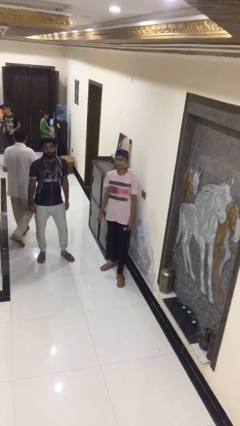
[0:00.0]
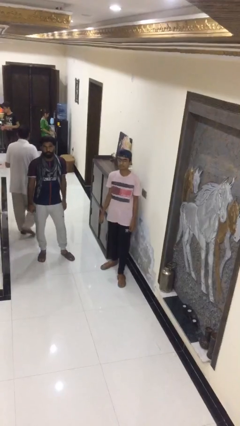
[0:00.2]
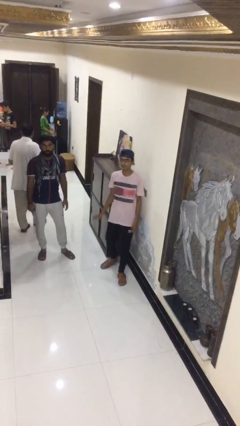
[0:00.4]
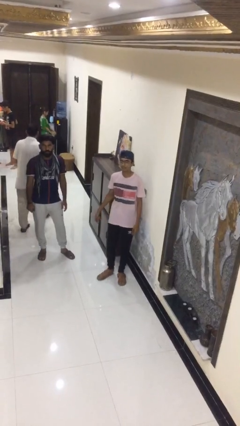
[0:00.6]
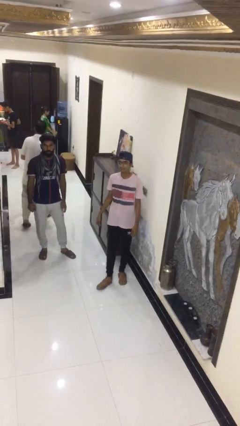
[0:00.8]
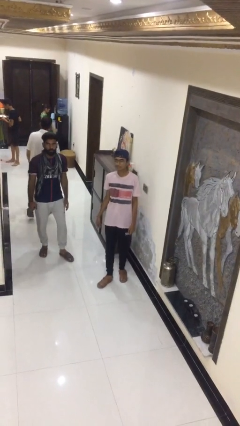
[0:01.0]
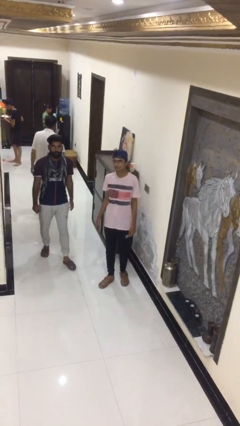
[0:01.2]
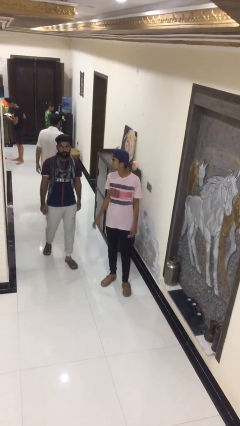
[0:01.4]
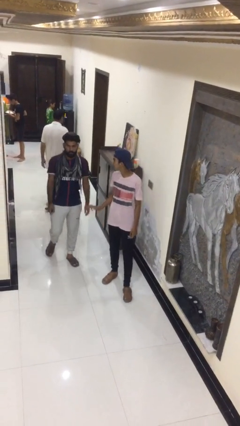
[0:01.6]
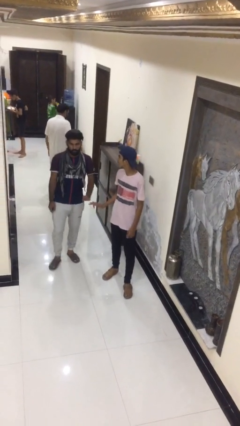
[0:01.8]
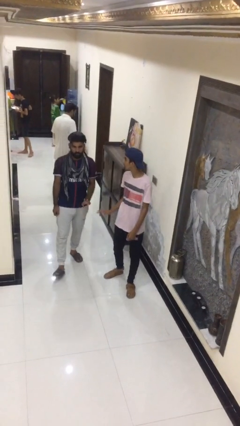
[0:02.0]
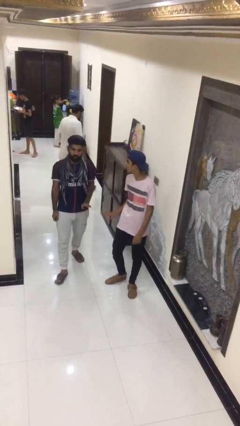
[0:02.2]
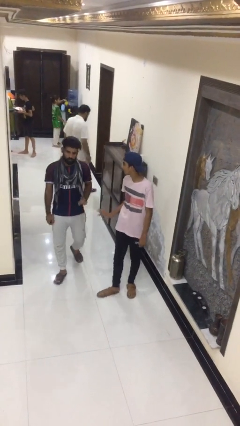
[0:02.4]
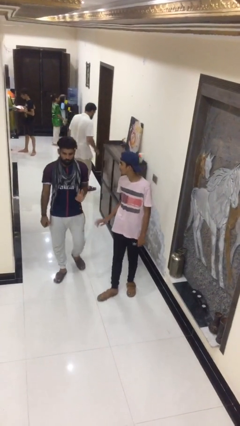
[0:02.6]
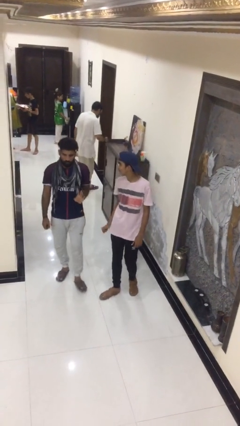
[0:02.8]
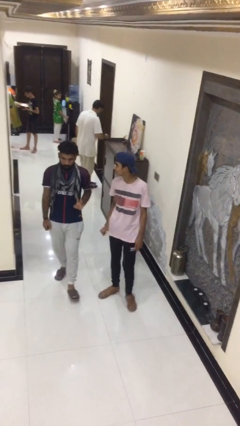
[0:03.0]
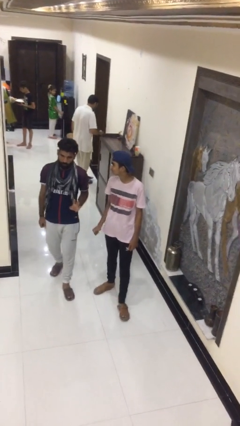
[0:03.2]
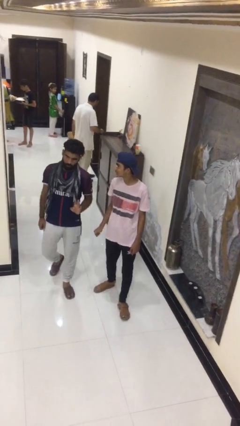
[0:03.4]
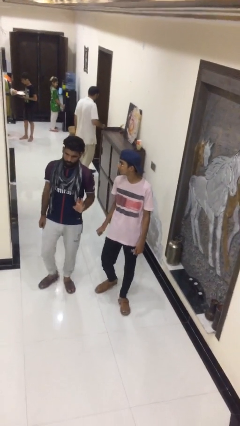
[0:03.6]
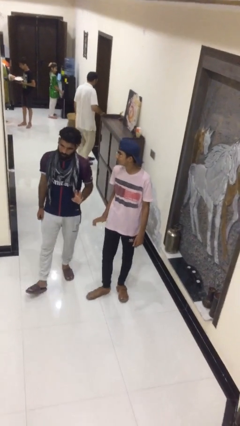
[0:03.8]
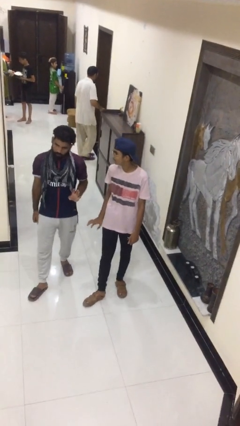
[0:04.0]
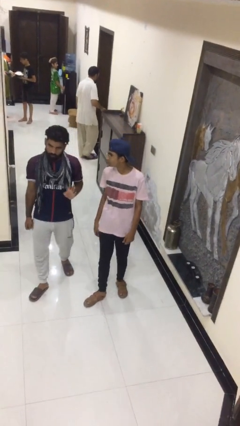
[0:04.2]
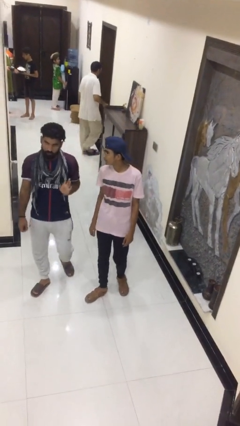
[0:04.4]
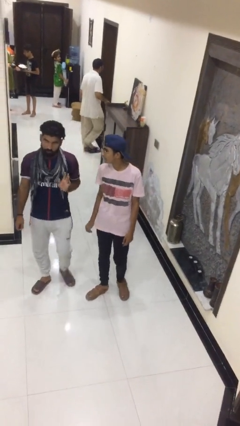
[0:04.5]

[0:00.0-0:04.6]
person talks to person

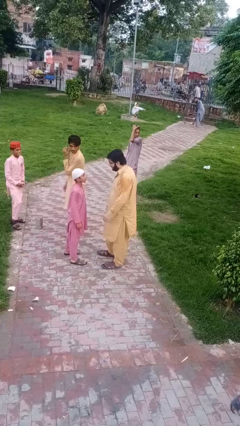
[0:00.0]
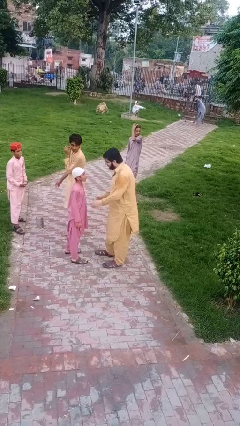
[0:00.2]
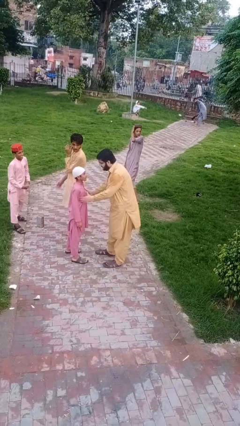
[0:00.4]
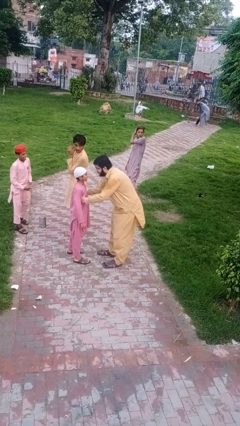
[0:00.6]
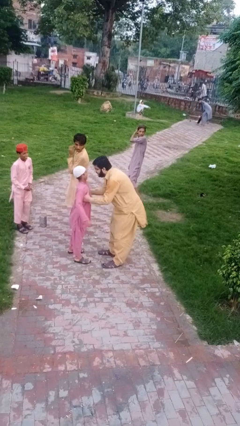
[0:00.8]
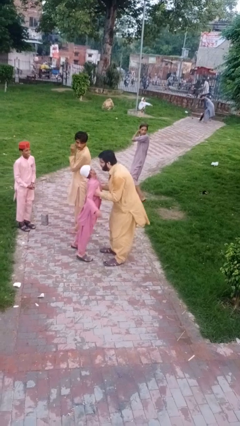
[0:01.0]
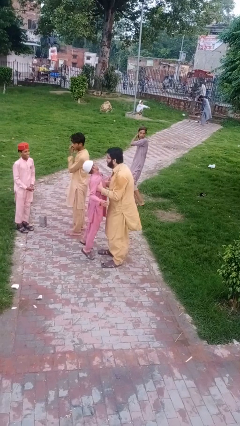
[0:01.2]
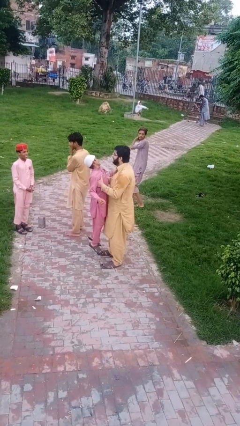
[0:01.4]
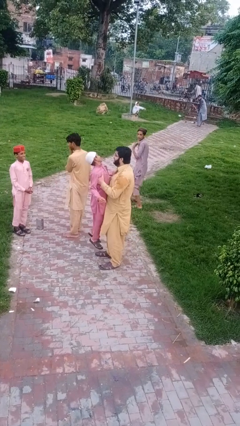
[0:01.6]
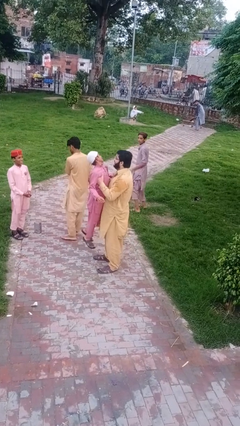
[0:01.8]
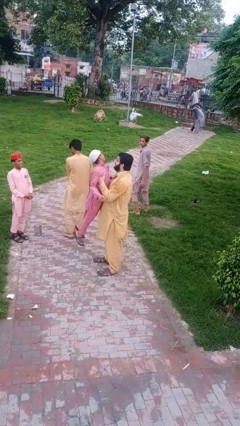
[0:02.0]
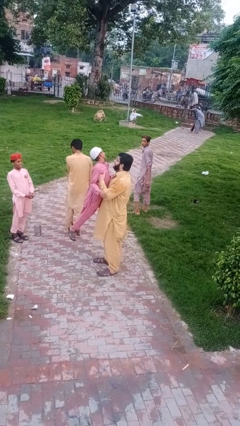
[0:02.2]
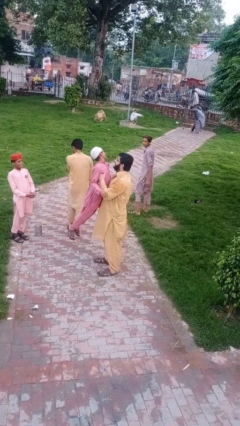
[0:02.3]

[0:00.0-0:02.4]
person picks up person

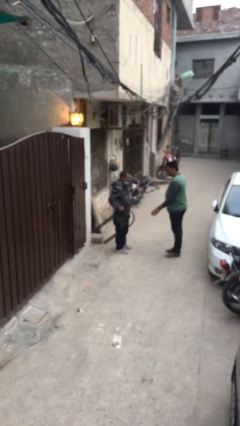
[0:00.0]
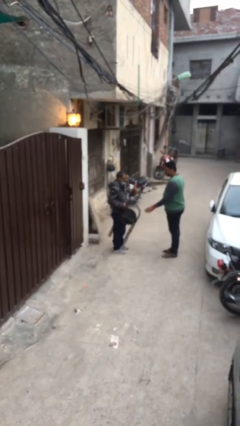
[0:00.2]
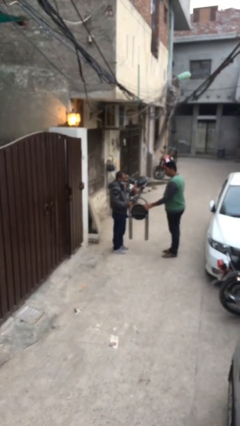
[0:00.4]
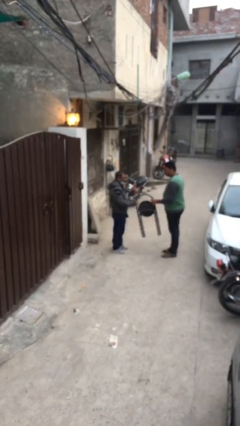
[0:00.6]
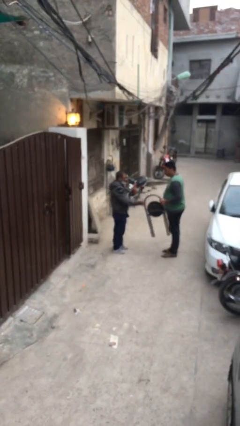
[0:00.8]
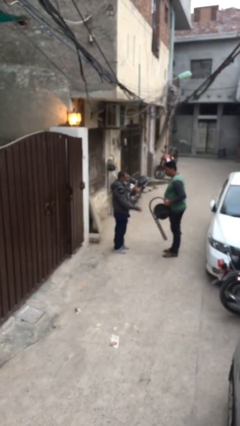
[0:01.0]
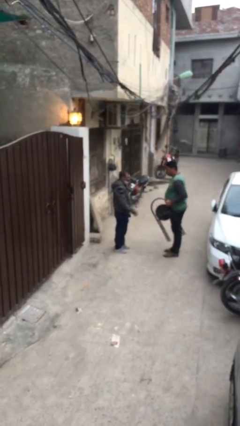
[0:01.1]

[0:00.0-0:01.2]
person transfers object to person

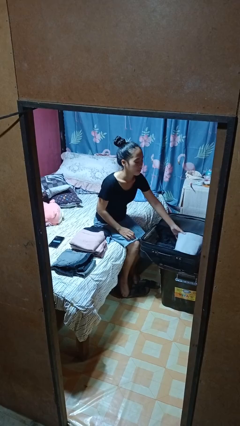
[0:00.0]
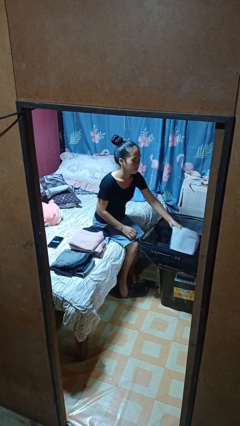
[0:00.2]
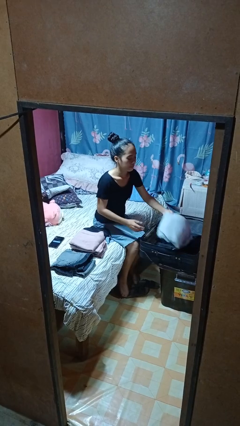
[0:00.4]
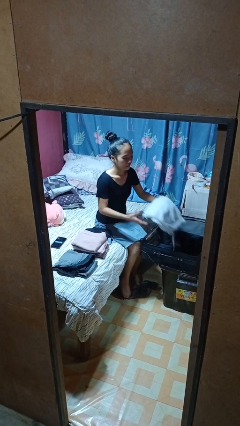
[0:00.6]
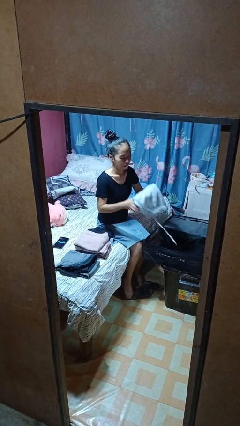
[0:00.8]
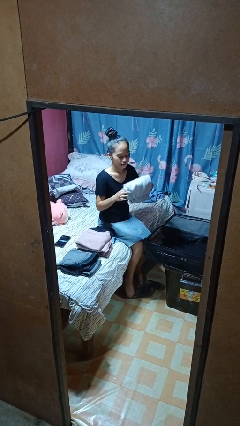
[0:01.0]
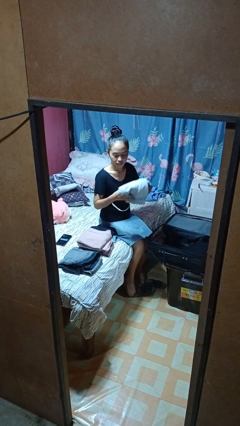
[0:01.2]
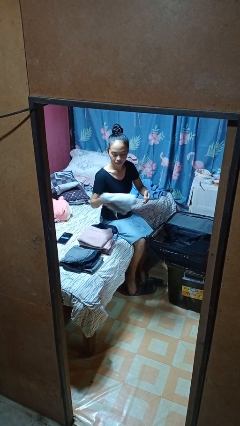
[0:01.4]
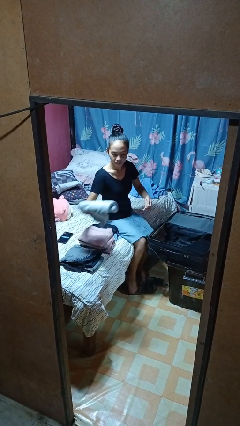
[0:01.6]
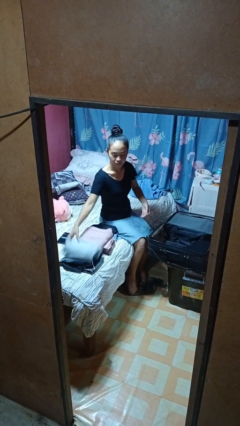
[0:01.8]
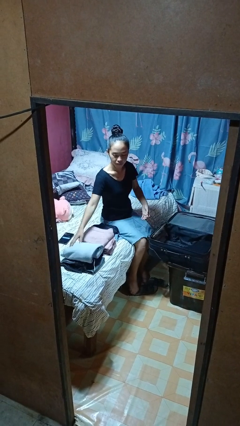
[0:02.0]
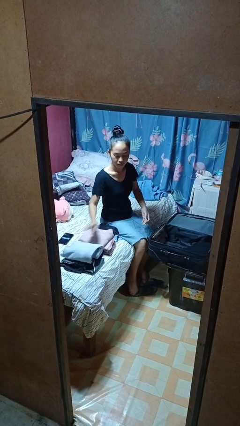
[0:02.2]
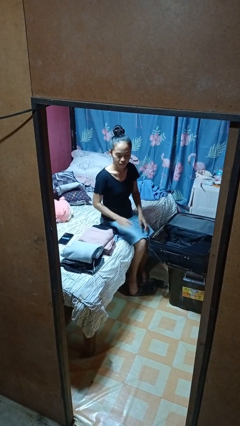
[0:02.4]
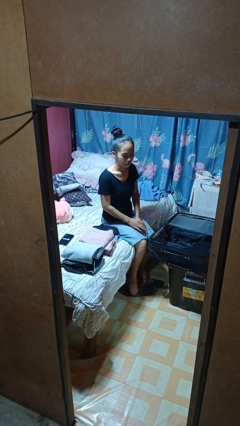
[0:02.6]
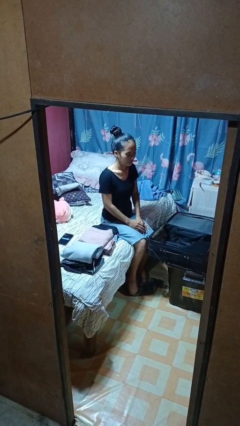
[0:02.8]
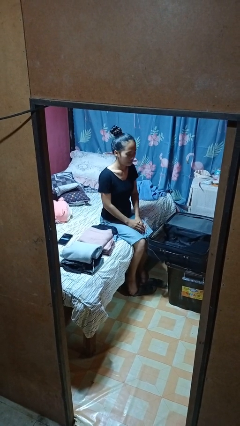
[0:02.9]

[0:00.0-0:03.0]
person unloads clothes from suitcase

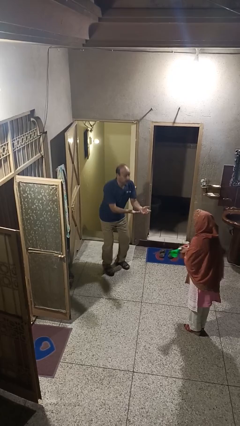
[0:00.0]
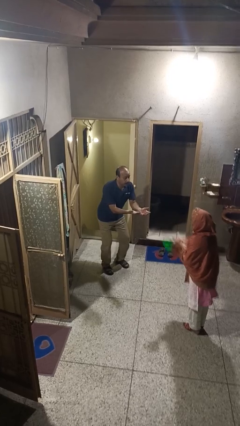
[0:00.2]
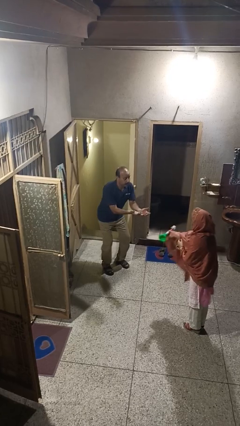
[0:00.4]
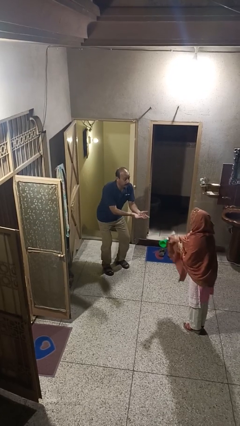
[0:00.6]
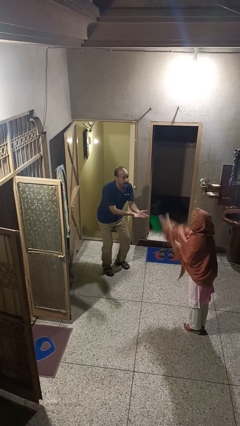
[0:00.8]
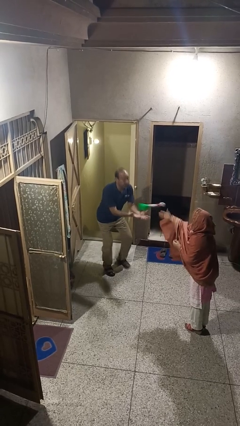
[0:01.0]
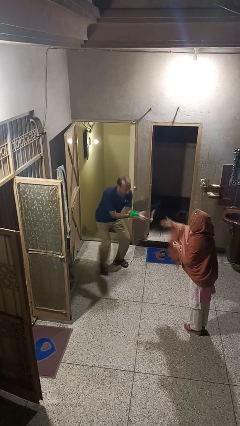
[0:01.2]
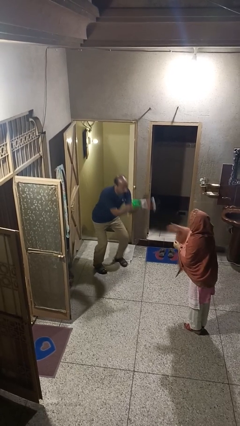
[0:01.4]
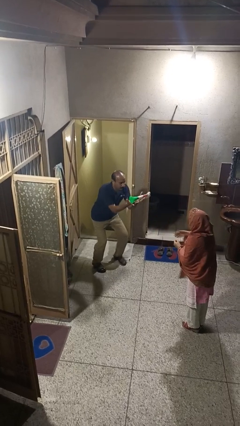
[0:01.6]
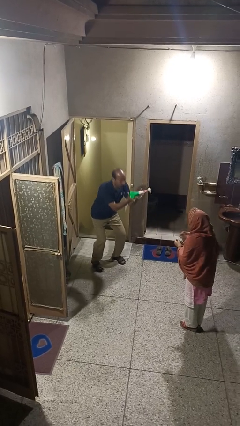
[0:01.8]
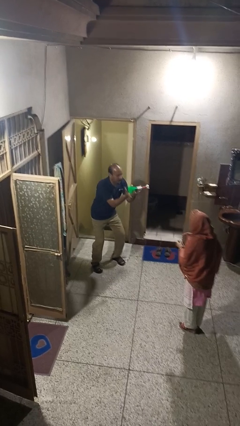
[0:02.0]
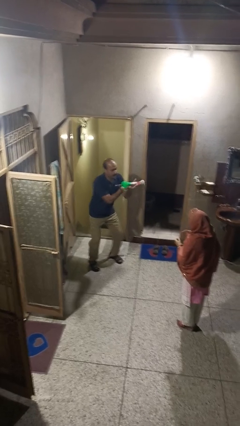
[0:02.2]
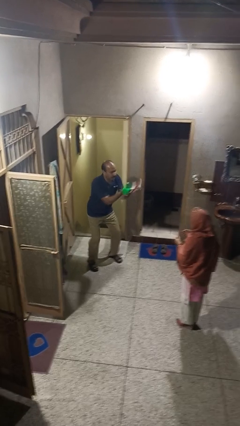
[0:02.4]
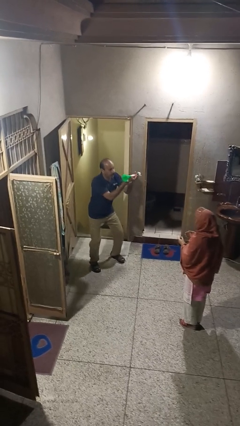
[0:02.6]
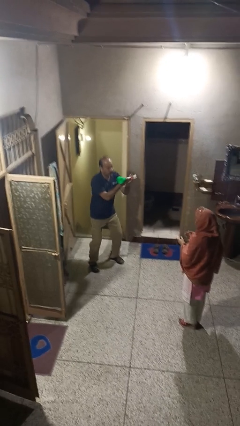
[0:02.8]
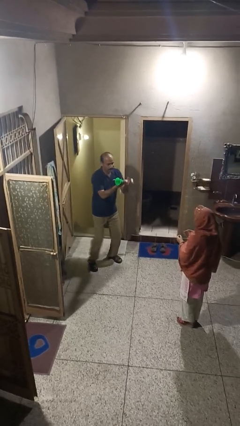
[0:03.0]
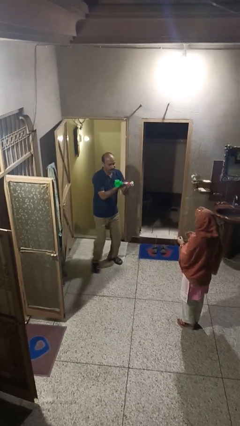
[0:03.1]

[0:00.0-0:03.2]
person catches object from person

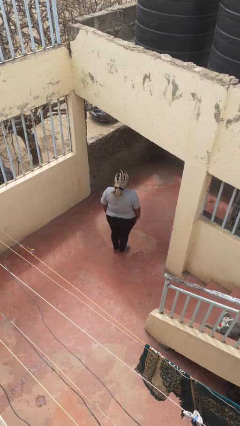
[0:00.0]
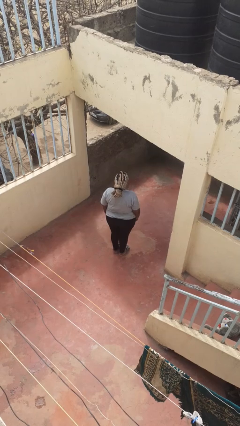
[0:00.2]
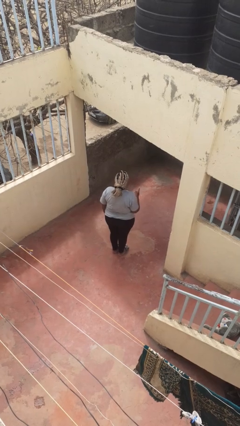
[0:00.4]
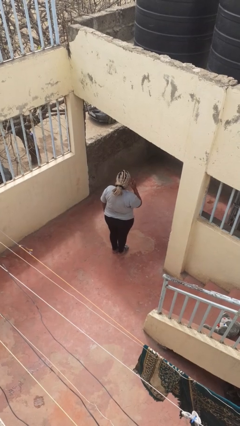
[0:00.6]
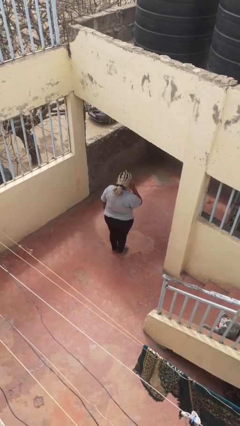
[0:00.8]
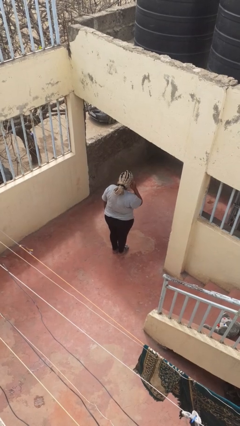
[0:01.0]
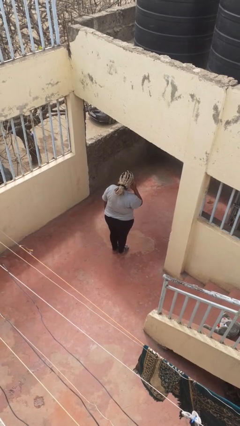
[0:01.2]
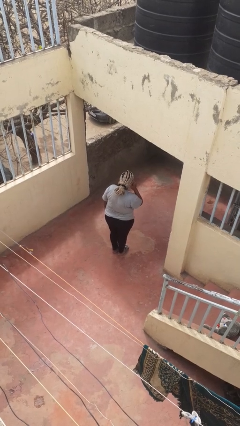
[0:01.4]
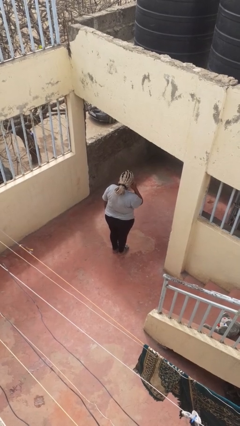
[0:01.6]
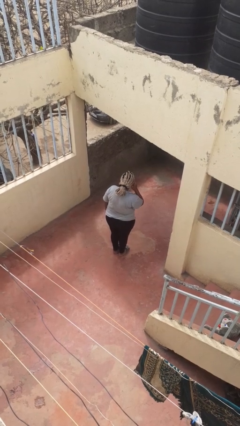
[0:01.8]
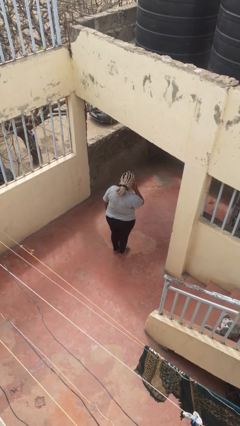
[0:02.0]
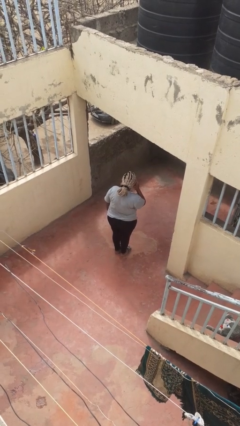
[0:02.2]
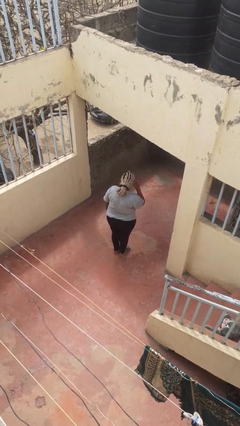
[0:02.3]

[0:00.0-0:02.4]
person gestures listen closely

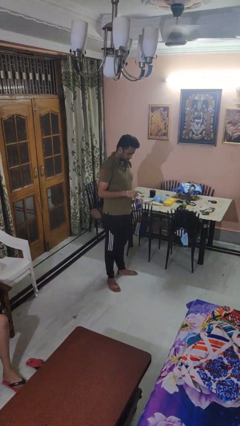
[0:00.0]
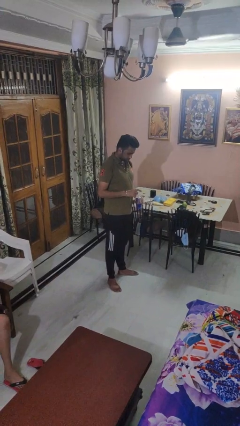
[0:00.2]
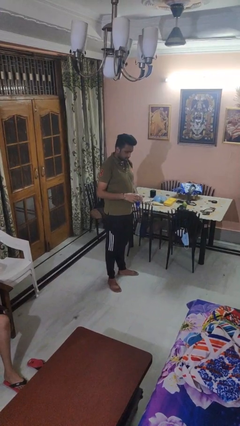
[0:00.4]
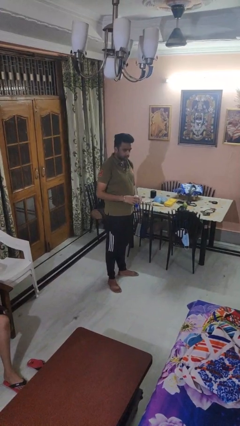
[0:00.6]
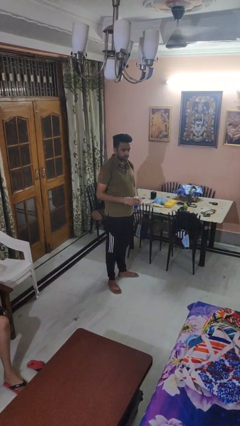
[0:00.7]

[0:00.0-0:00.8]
person opens beverage can
